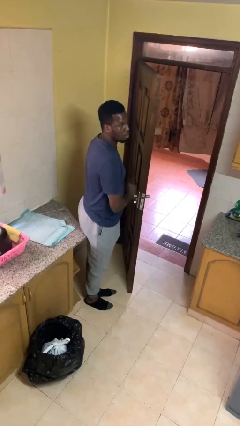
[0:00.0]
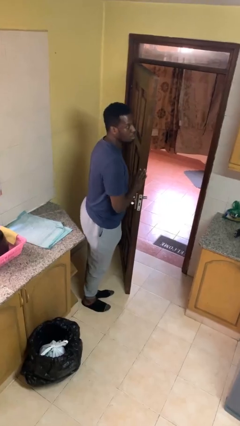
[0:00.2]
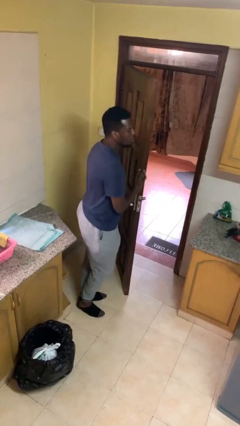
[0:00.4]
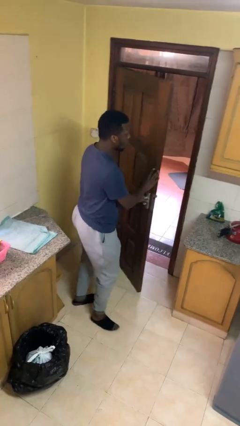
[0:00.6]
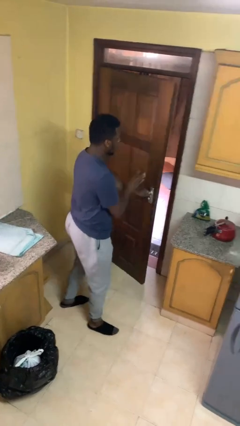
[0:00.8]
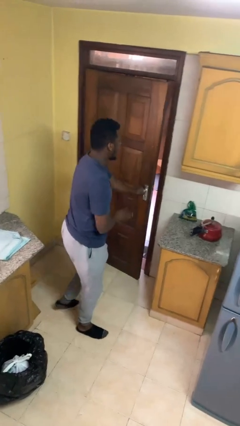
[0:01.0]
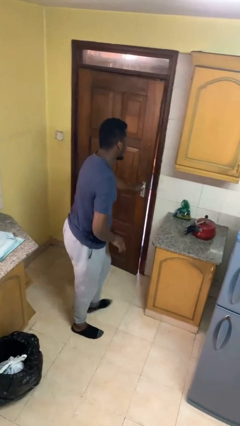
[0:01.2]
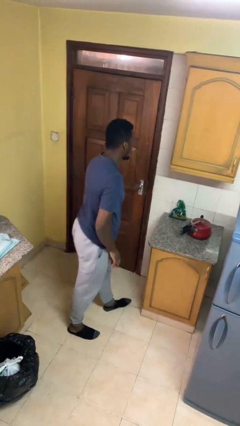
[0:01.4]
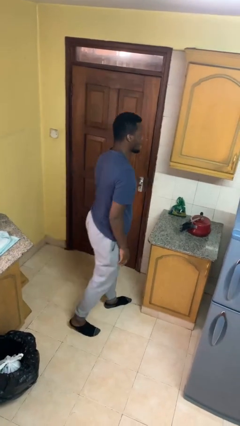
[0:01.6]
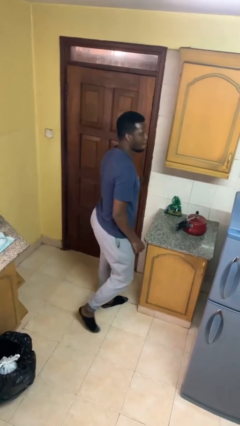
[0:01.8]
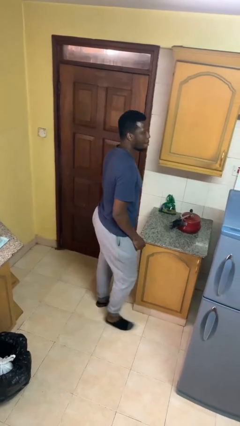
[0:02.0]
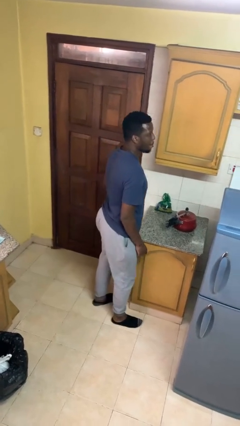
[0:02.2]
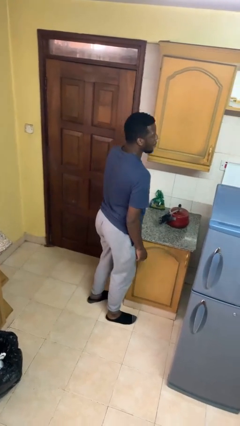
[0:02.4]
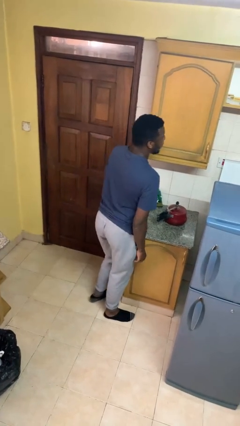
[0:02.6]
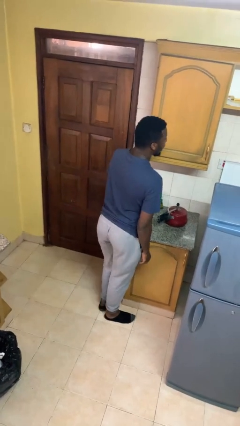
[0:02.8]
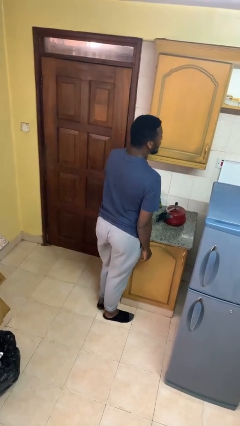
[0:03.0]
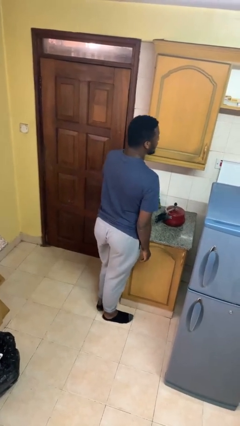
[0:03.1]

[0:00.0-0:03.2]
person closes facility door

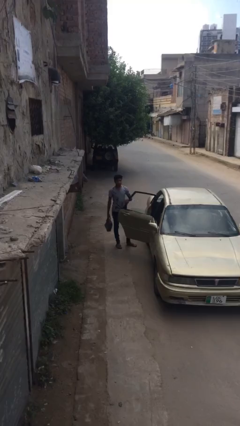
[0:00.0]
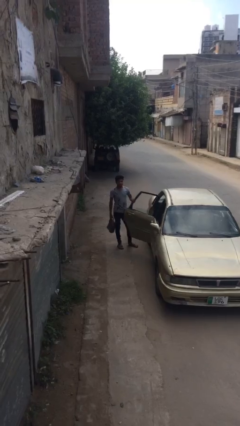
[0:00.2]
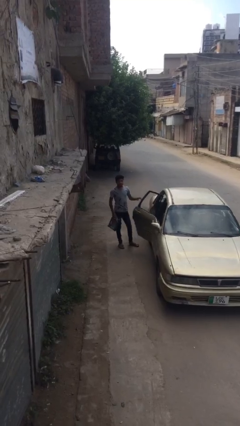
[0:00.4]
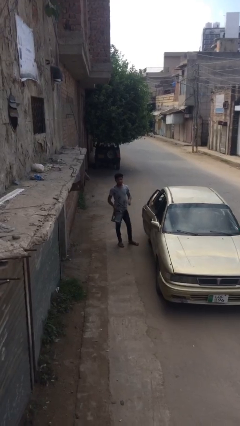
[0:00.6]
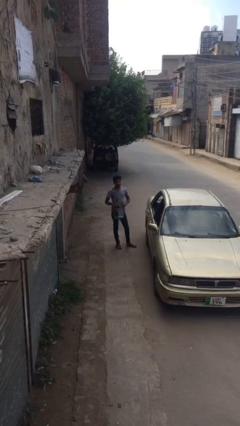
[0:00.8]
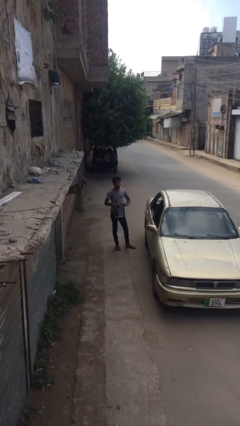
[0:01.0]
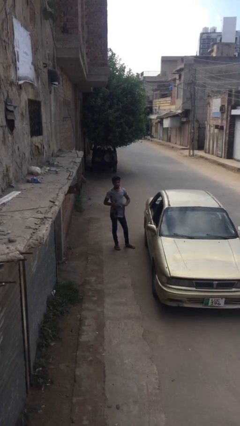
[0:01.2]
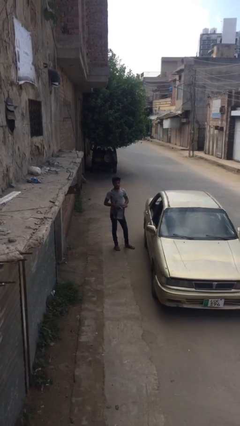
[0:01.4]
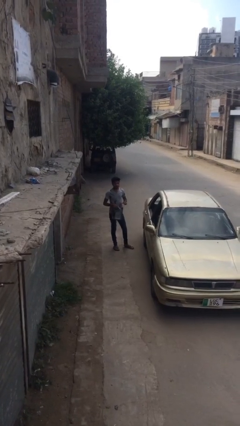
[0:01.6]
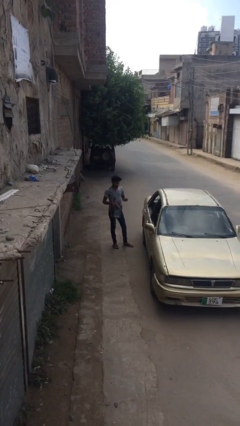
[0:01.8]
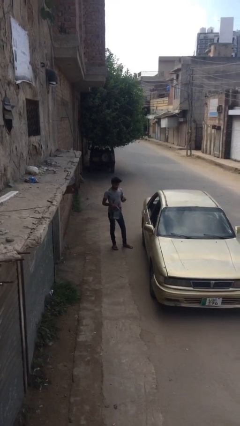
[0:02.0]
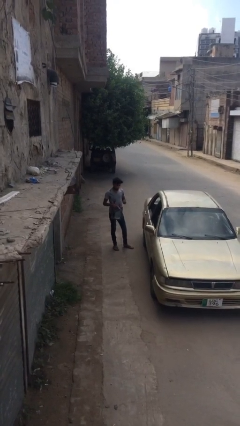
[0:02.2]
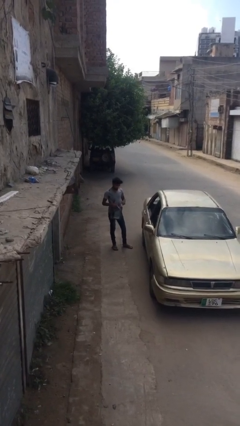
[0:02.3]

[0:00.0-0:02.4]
person closes car door

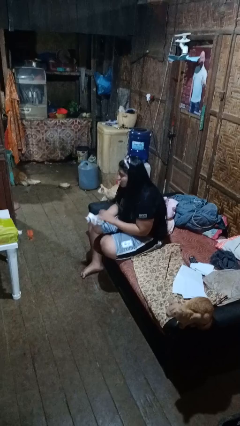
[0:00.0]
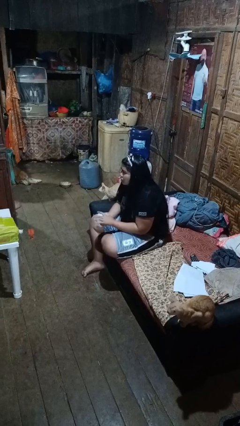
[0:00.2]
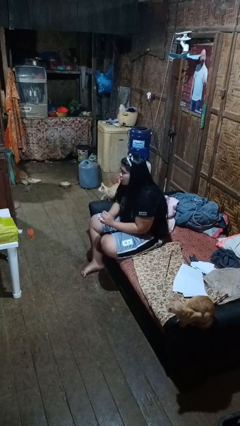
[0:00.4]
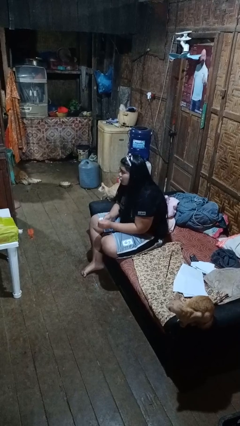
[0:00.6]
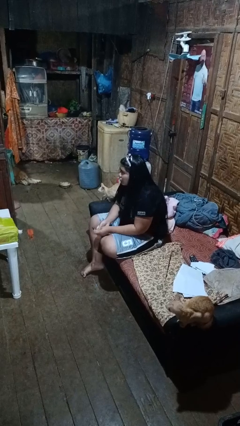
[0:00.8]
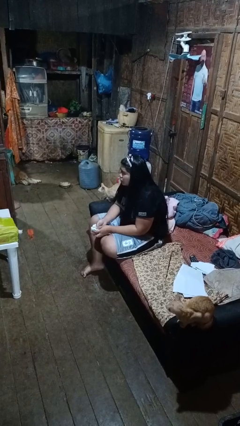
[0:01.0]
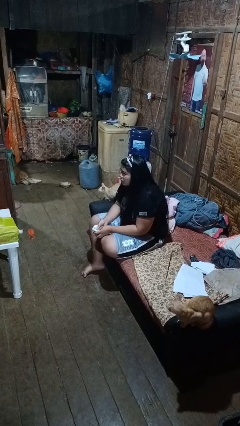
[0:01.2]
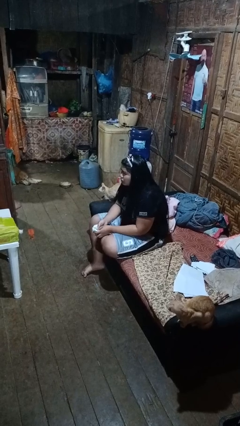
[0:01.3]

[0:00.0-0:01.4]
person crumples paper

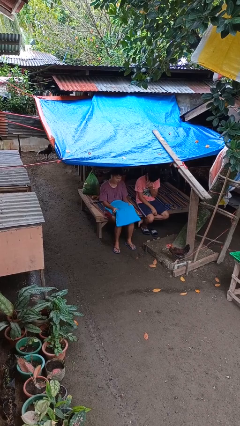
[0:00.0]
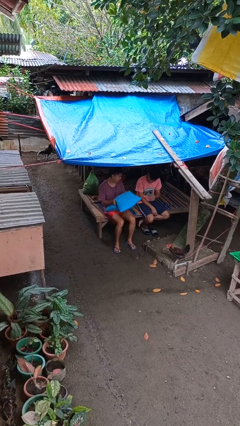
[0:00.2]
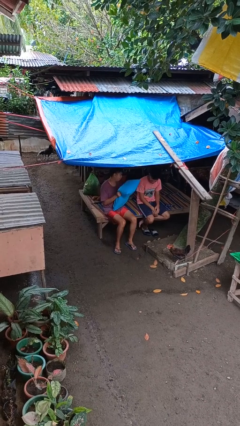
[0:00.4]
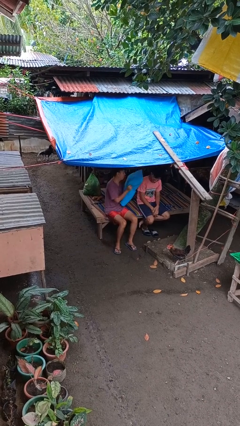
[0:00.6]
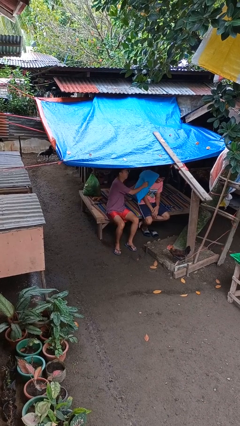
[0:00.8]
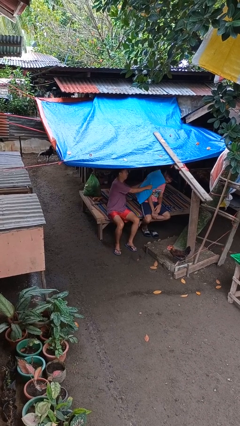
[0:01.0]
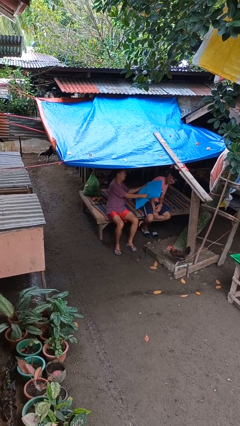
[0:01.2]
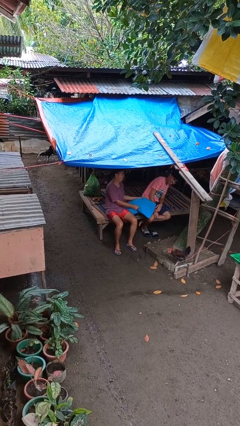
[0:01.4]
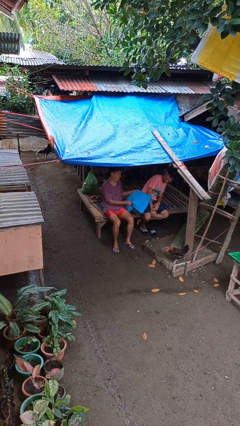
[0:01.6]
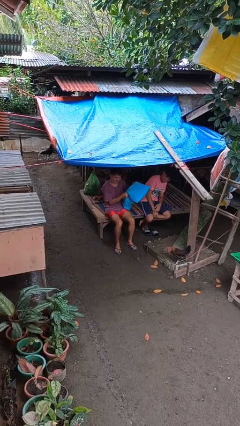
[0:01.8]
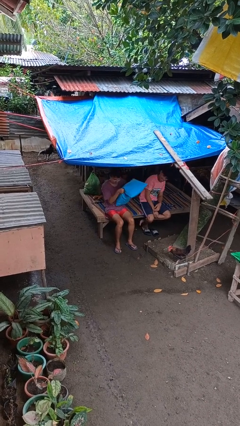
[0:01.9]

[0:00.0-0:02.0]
person hits person with pillow

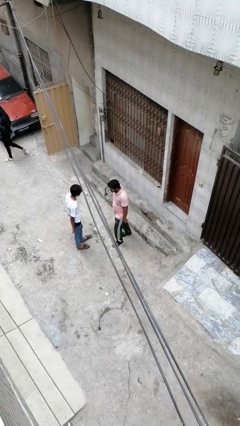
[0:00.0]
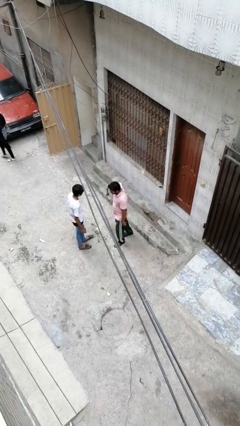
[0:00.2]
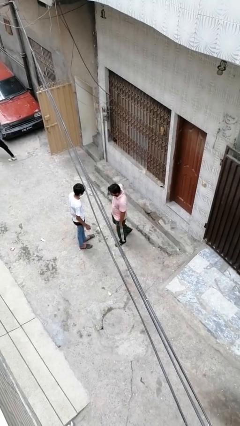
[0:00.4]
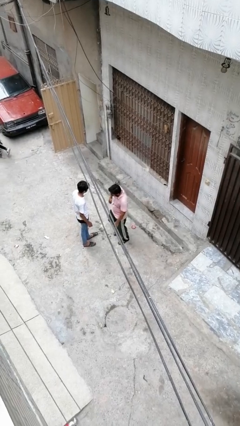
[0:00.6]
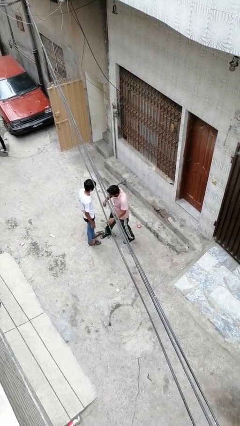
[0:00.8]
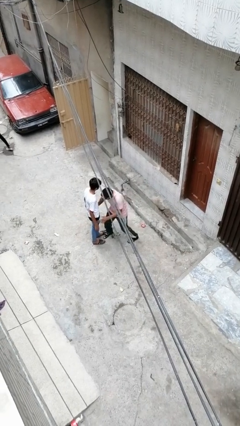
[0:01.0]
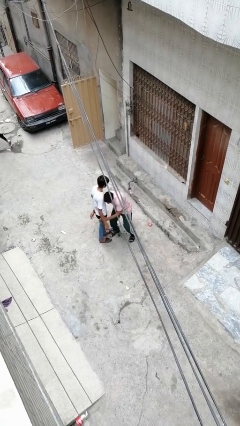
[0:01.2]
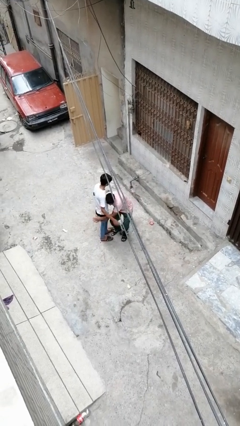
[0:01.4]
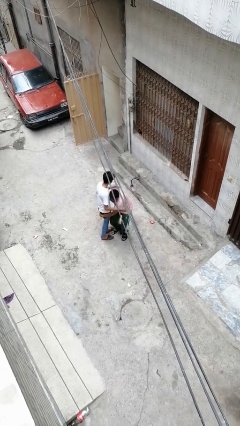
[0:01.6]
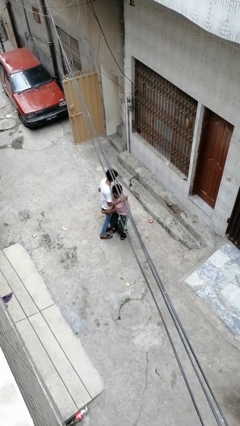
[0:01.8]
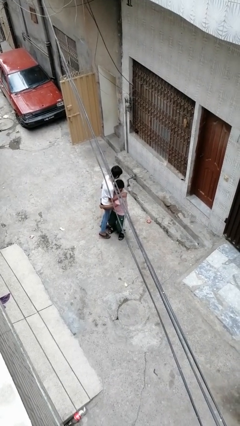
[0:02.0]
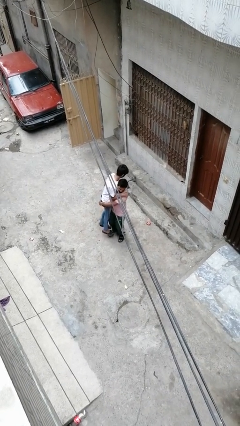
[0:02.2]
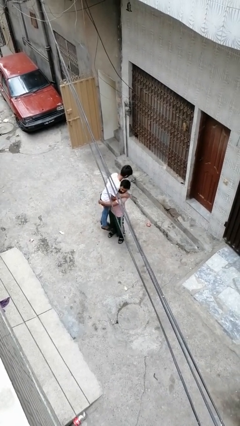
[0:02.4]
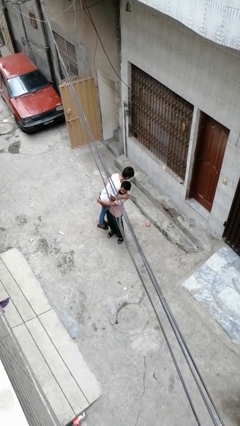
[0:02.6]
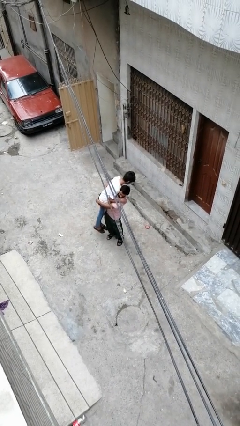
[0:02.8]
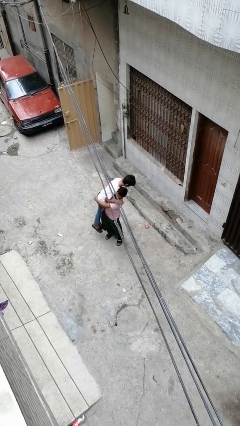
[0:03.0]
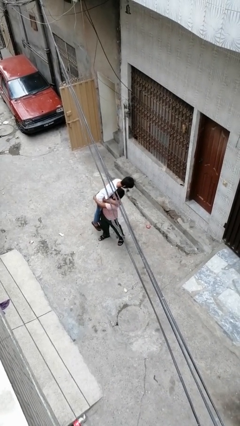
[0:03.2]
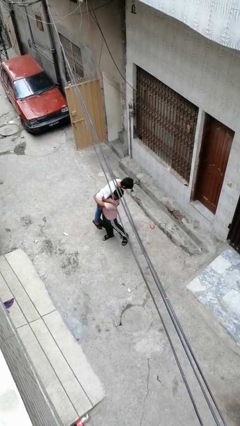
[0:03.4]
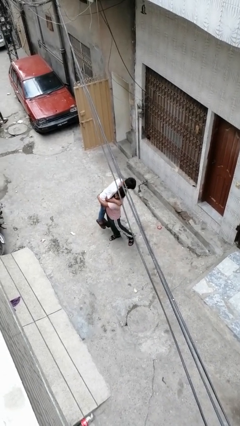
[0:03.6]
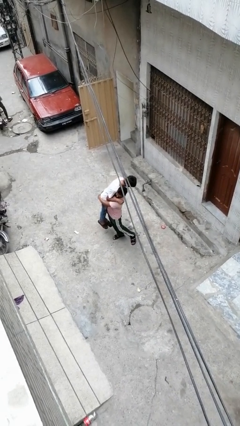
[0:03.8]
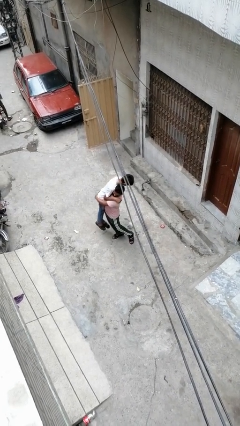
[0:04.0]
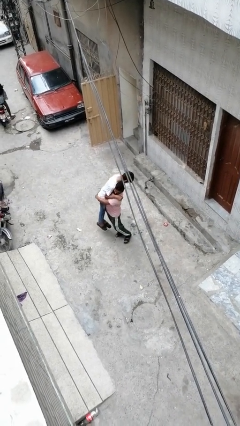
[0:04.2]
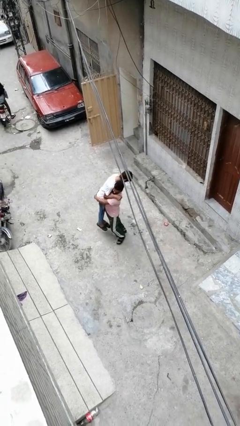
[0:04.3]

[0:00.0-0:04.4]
person picks up person

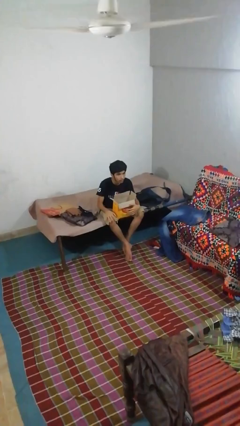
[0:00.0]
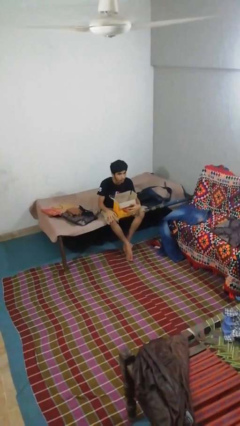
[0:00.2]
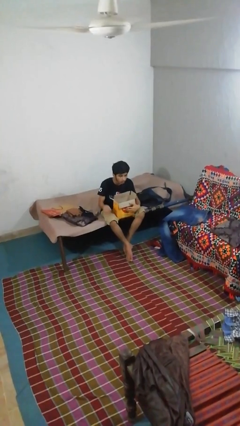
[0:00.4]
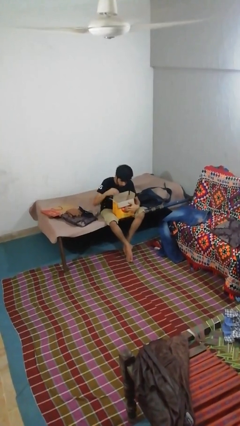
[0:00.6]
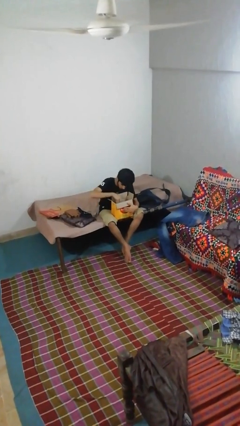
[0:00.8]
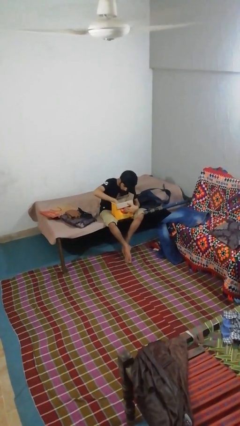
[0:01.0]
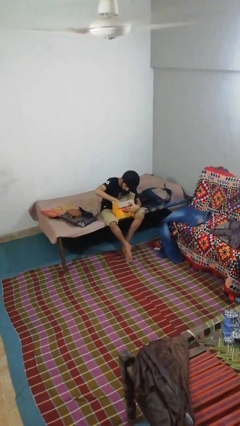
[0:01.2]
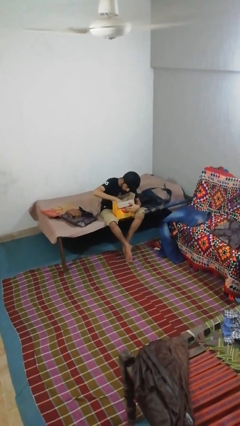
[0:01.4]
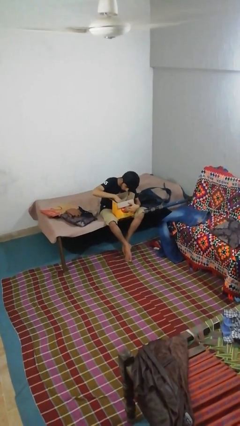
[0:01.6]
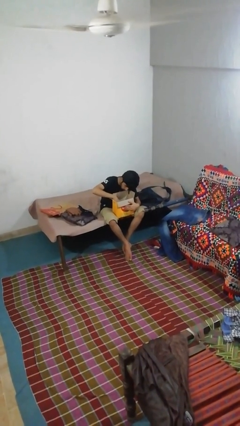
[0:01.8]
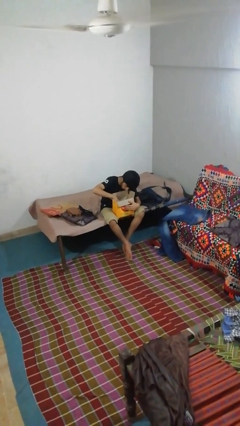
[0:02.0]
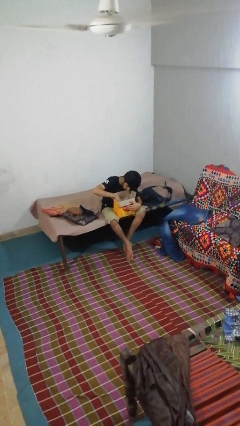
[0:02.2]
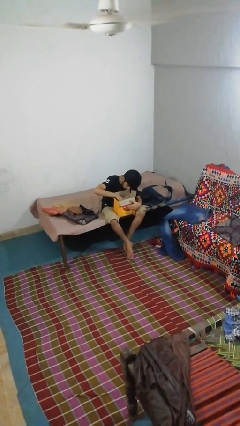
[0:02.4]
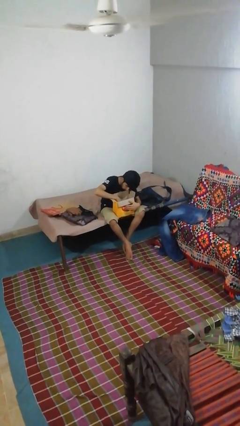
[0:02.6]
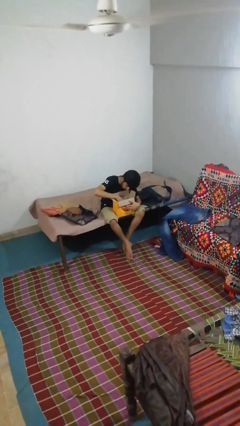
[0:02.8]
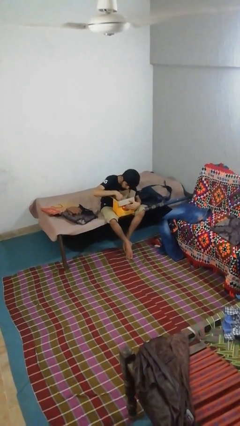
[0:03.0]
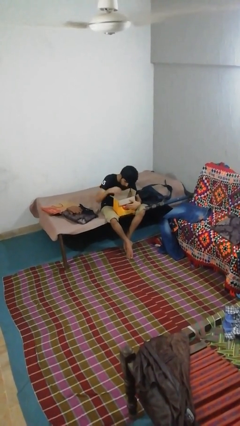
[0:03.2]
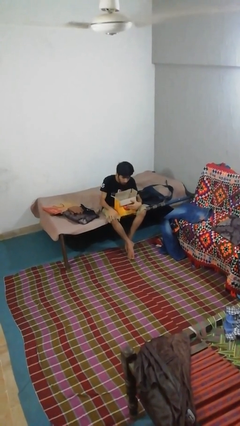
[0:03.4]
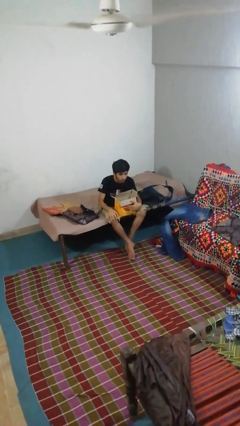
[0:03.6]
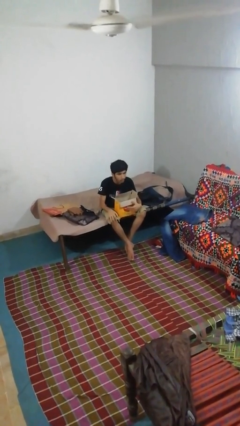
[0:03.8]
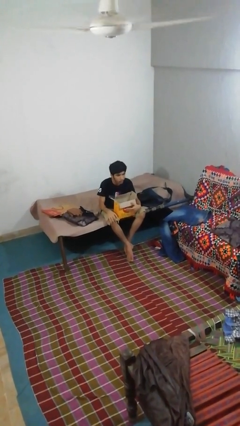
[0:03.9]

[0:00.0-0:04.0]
person searches in box
